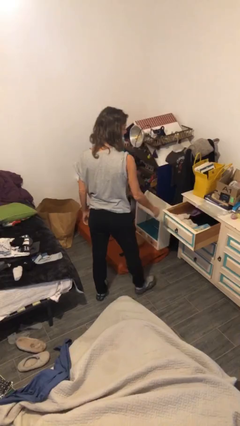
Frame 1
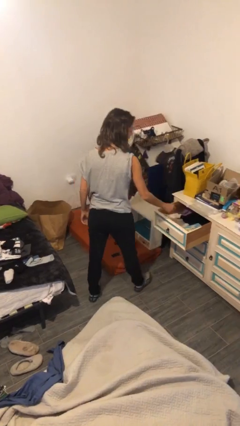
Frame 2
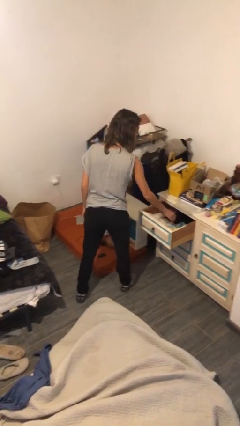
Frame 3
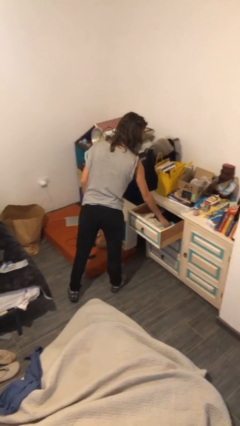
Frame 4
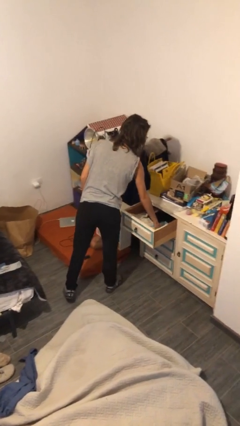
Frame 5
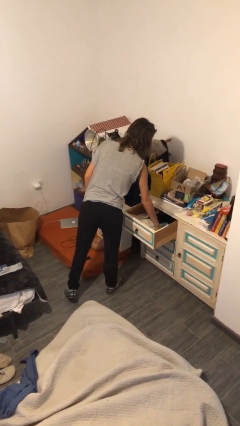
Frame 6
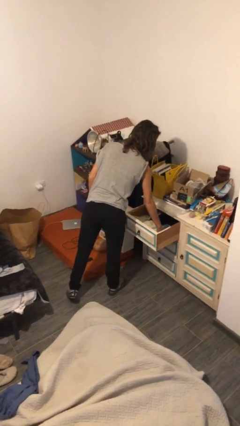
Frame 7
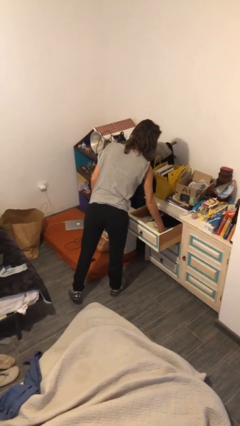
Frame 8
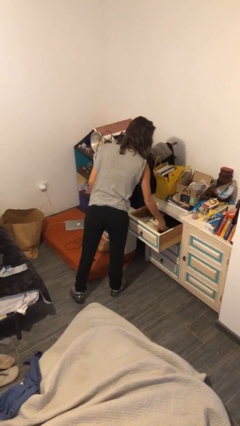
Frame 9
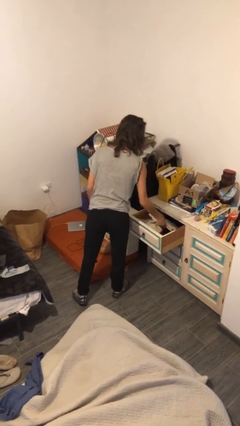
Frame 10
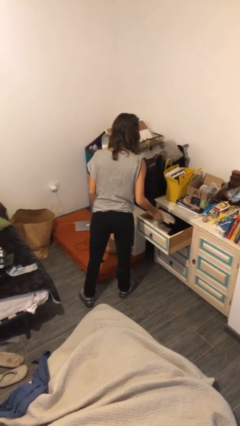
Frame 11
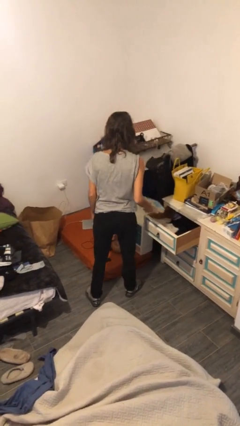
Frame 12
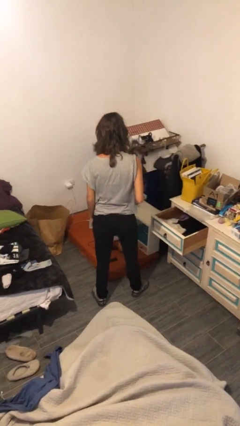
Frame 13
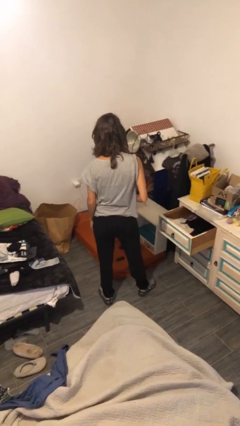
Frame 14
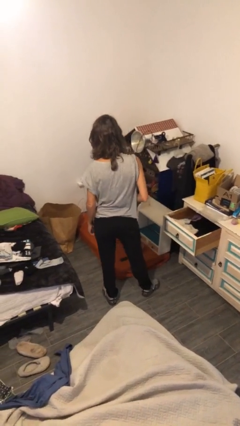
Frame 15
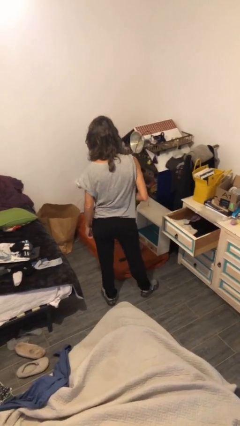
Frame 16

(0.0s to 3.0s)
person picks up object from cabinet

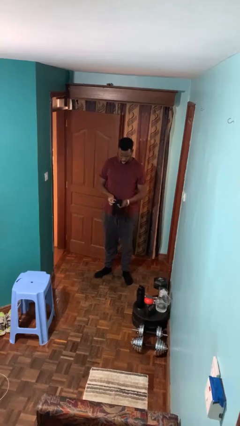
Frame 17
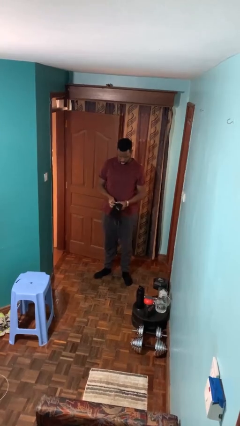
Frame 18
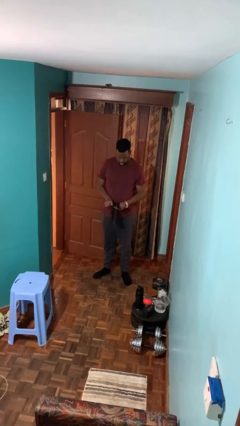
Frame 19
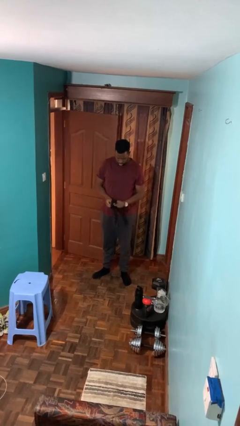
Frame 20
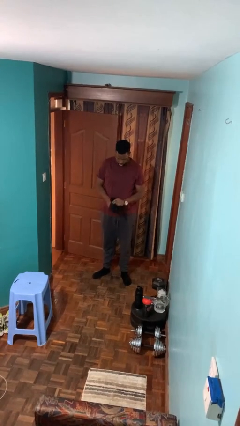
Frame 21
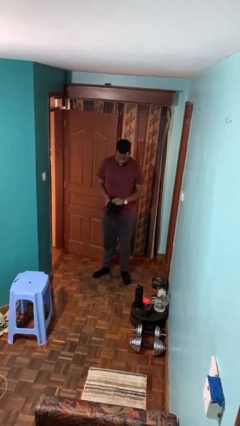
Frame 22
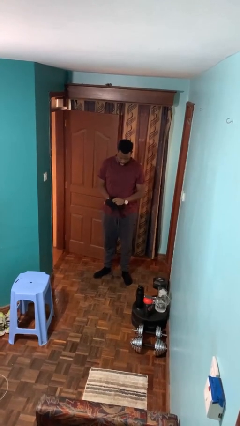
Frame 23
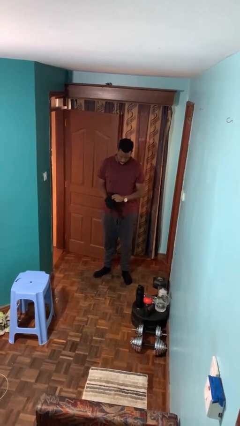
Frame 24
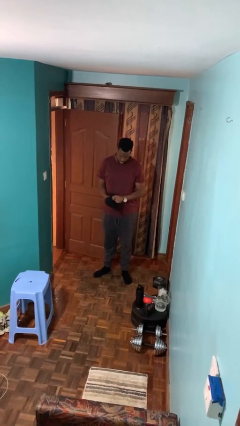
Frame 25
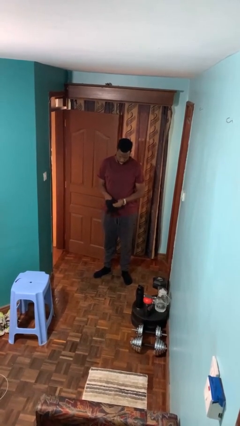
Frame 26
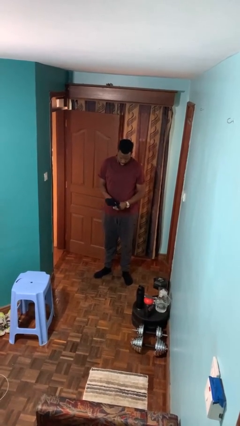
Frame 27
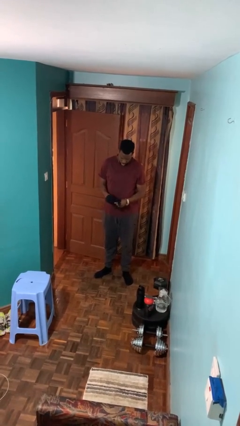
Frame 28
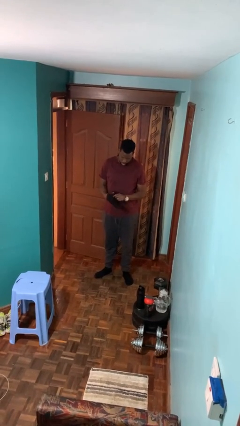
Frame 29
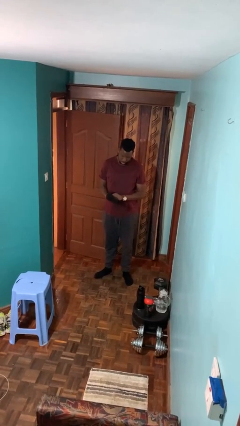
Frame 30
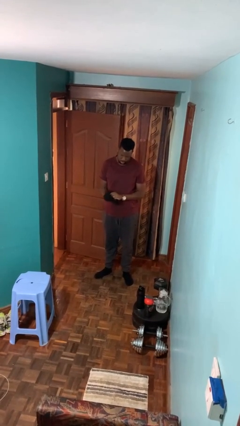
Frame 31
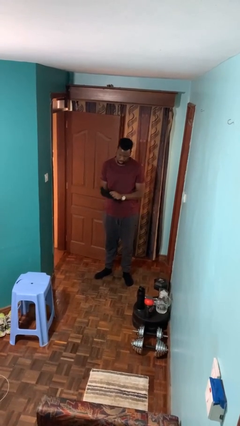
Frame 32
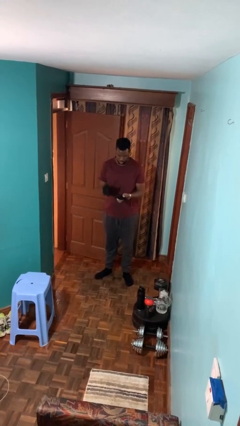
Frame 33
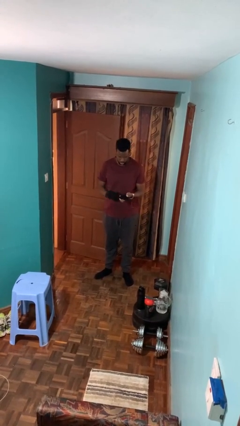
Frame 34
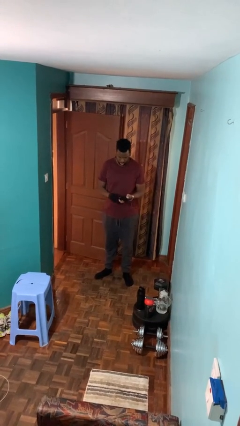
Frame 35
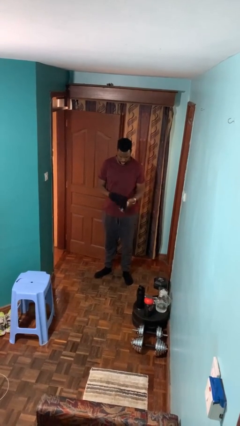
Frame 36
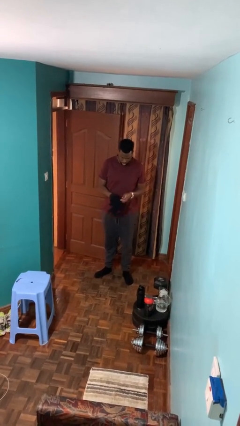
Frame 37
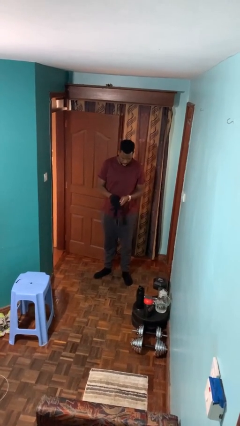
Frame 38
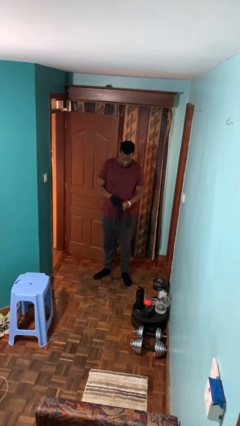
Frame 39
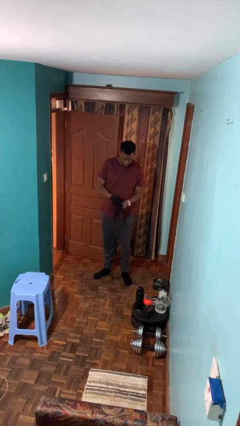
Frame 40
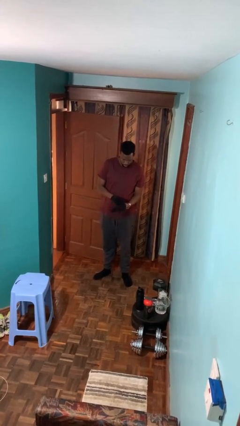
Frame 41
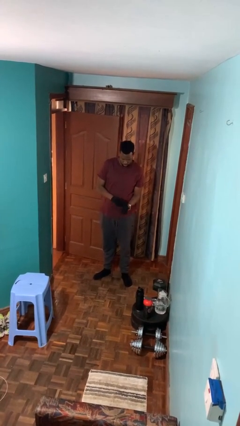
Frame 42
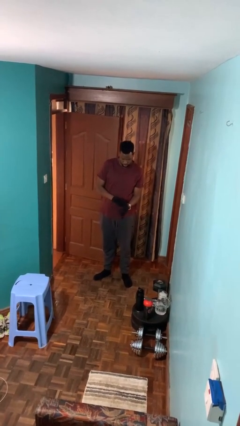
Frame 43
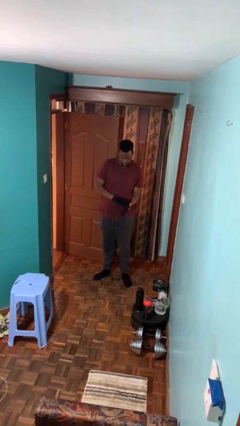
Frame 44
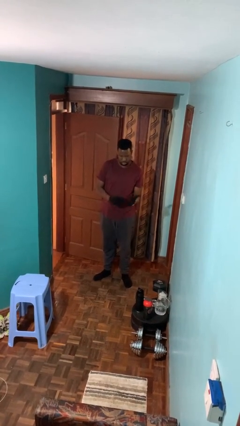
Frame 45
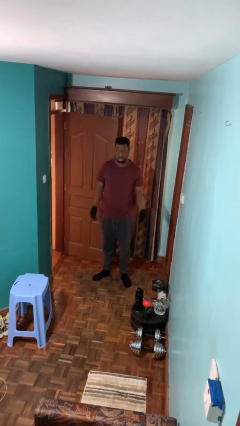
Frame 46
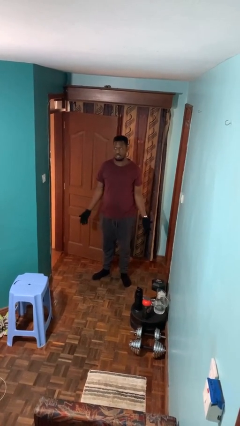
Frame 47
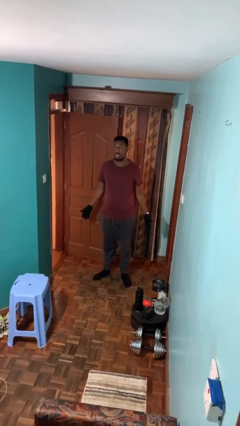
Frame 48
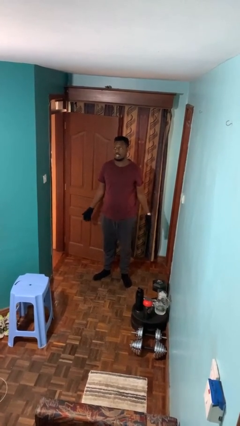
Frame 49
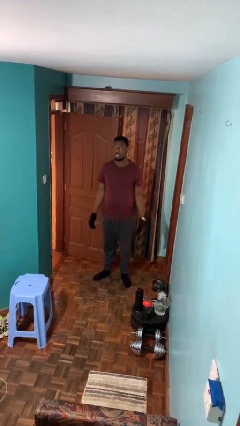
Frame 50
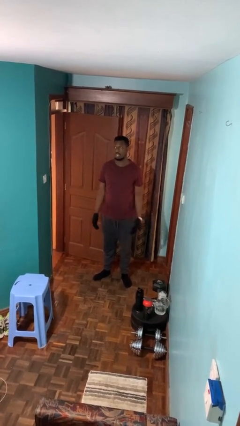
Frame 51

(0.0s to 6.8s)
person puts on gloves

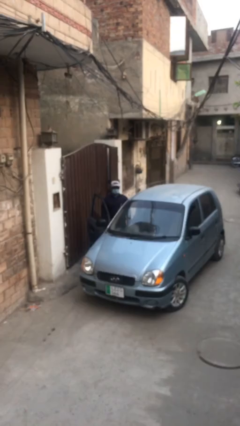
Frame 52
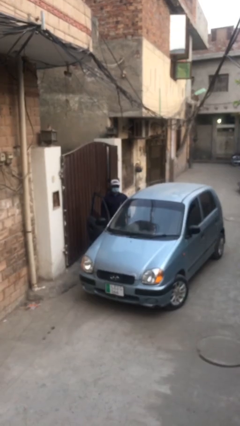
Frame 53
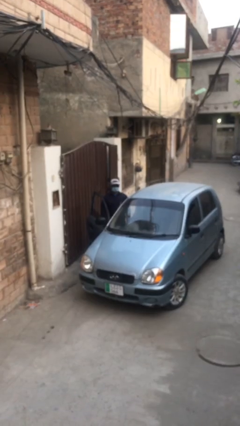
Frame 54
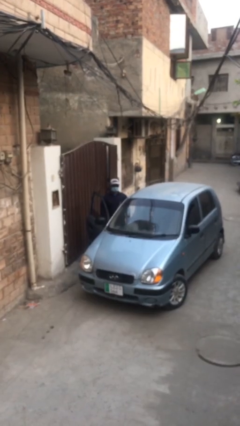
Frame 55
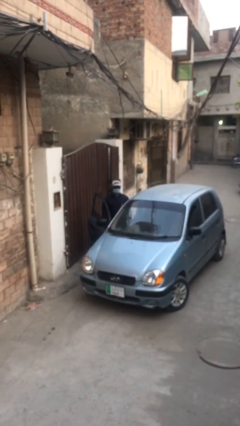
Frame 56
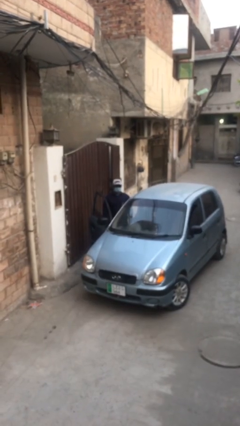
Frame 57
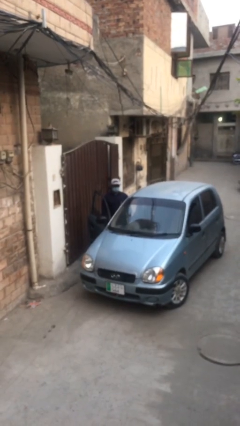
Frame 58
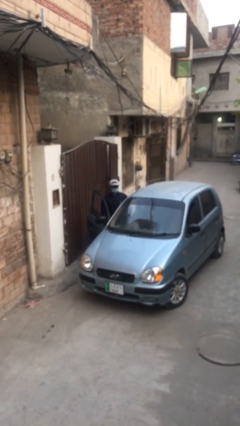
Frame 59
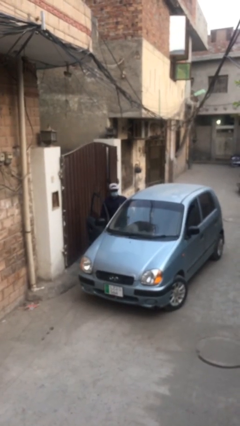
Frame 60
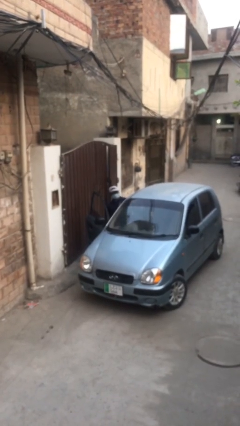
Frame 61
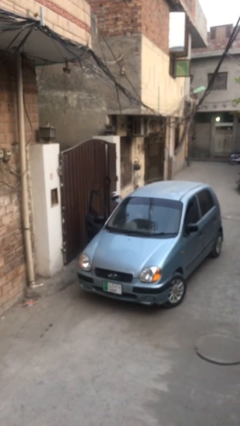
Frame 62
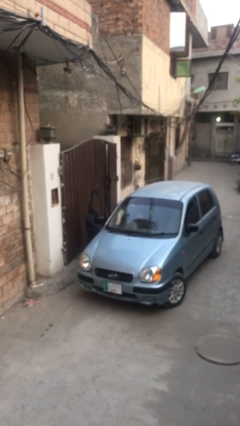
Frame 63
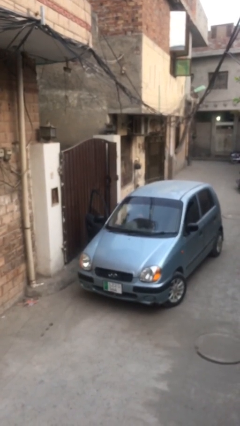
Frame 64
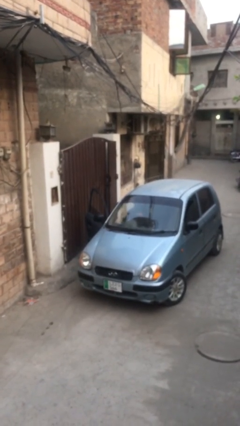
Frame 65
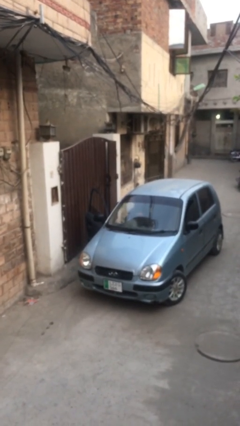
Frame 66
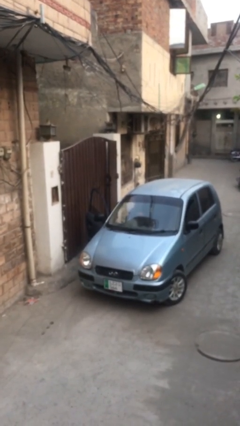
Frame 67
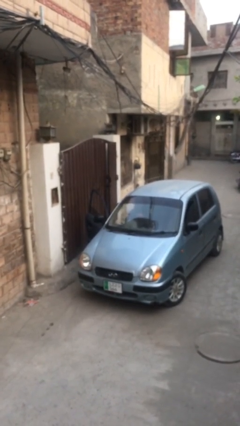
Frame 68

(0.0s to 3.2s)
person enters car

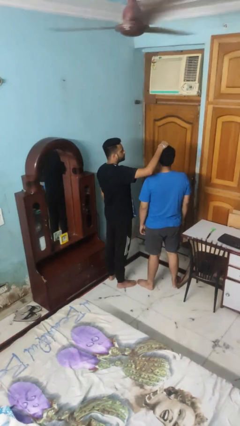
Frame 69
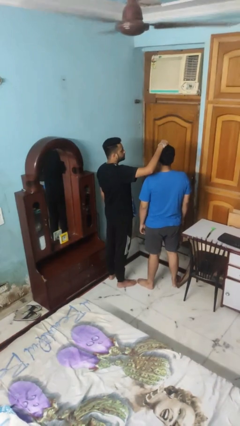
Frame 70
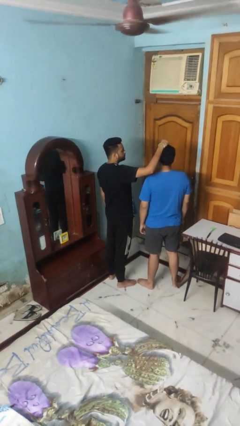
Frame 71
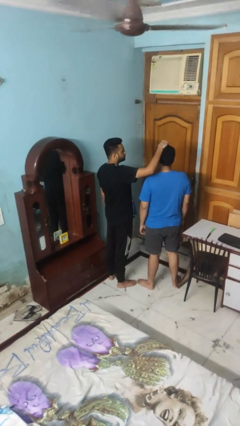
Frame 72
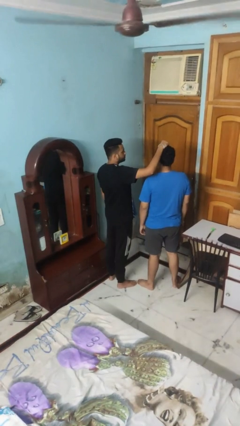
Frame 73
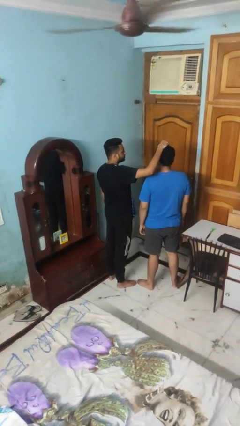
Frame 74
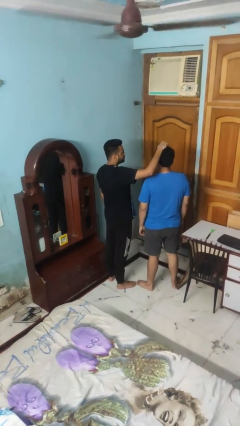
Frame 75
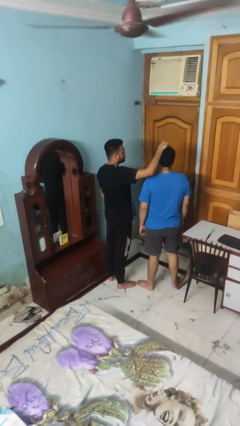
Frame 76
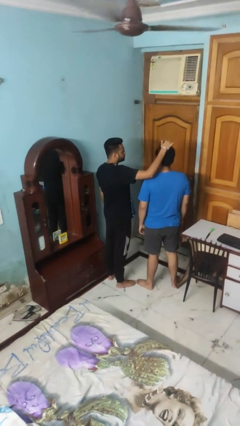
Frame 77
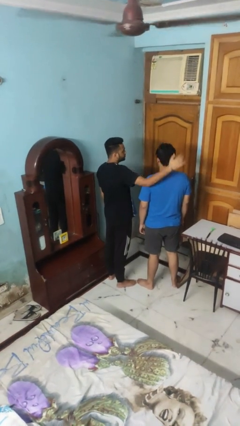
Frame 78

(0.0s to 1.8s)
person grabs person by hair

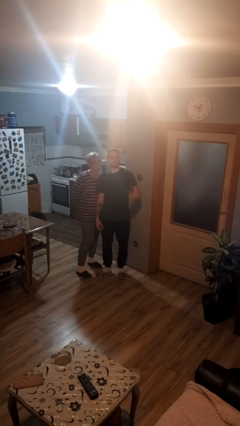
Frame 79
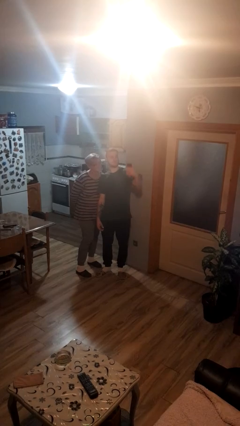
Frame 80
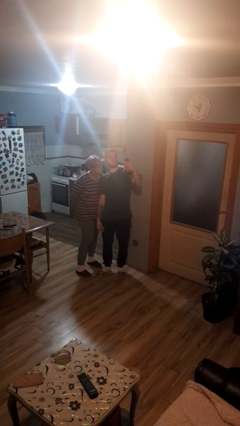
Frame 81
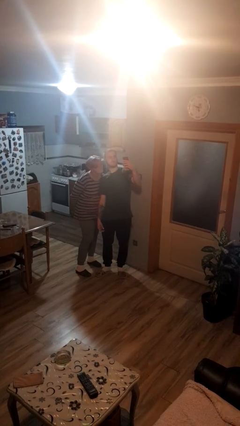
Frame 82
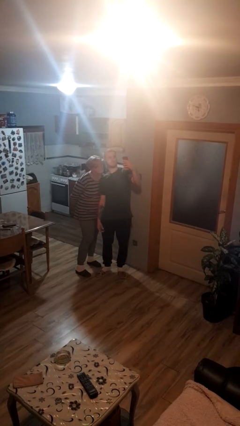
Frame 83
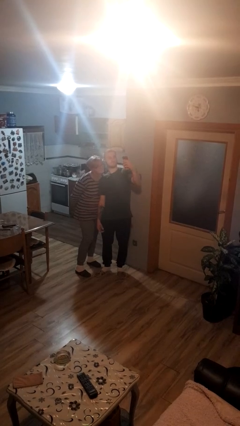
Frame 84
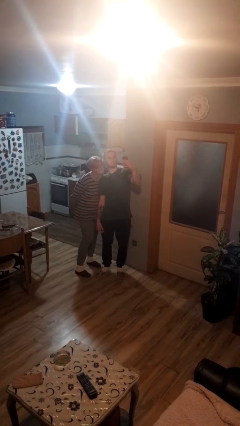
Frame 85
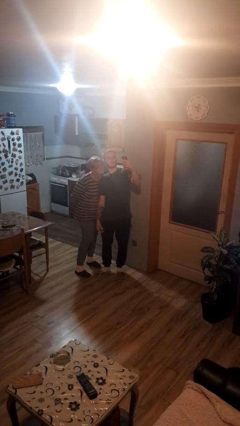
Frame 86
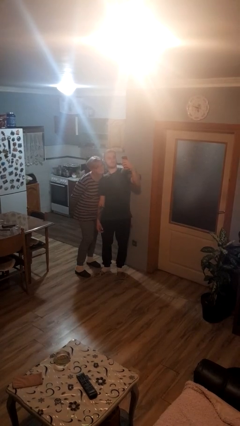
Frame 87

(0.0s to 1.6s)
person takes selfie with person

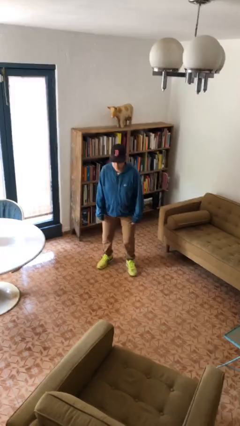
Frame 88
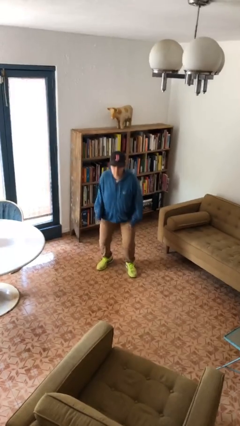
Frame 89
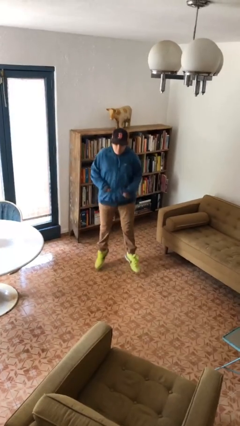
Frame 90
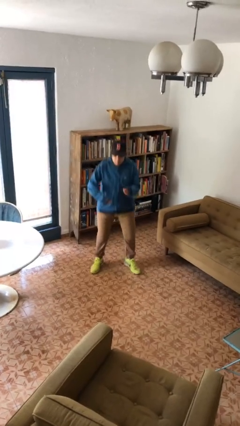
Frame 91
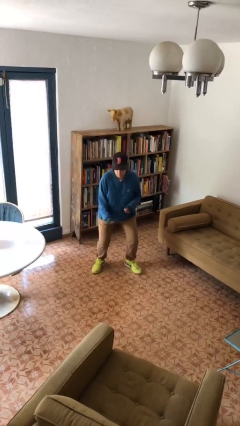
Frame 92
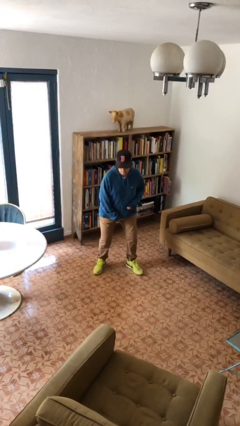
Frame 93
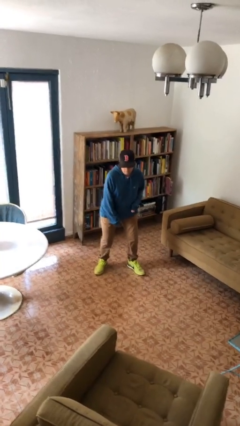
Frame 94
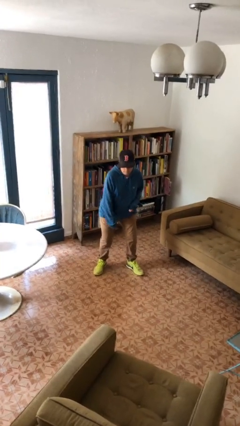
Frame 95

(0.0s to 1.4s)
person jumps

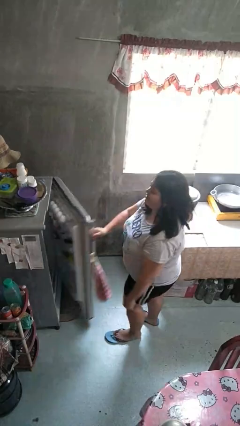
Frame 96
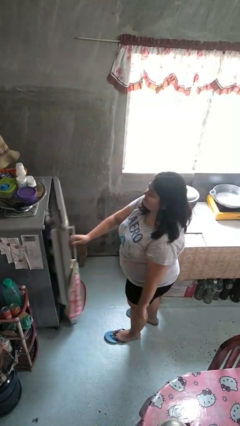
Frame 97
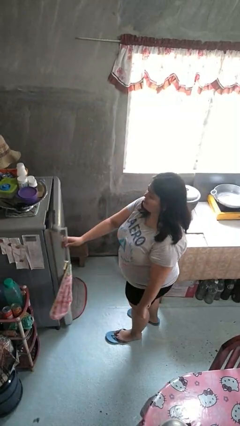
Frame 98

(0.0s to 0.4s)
person closes refrigerator
